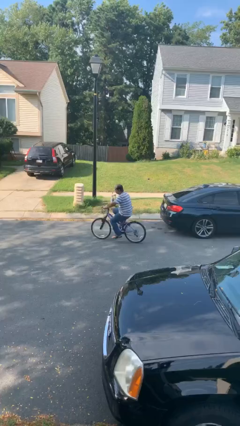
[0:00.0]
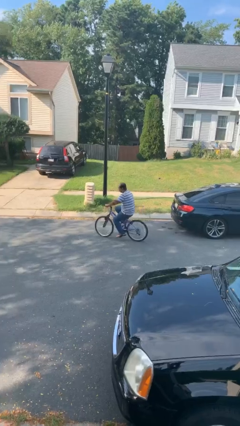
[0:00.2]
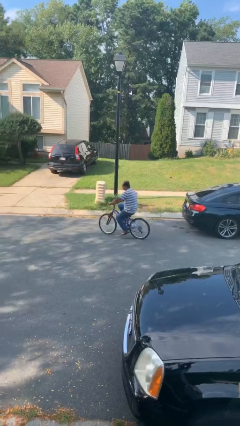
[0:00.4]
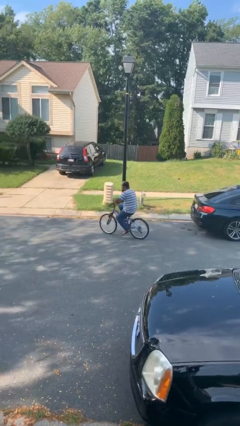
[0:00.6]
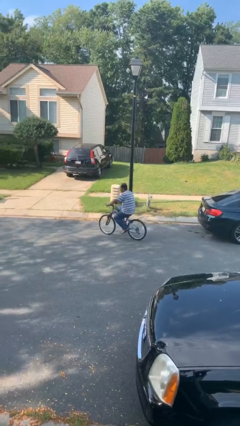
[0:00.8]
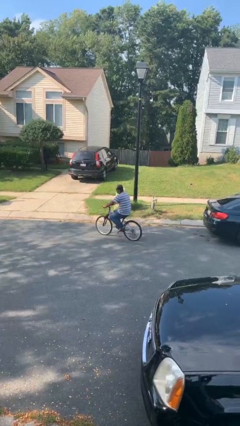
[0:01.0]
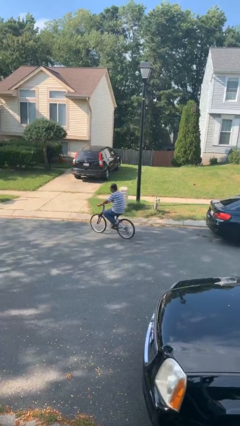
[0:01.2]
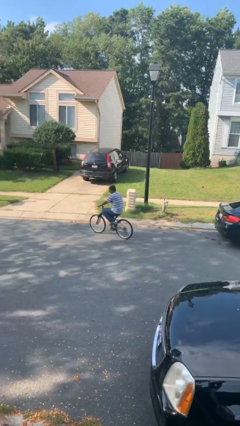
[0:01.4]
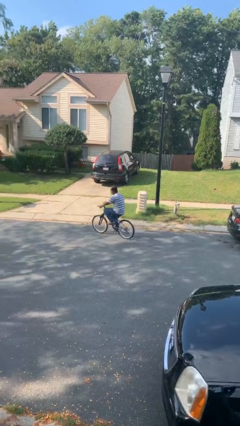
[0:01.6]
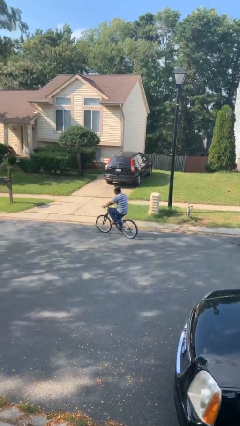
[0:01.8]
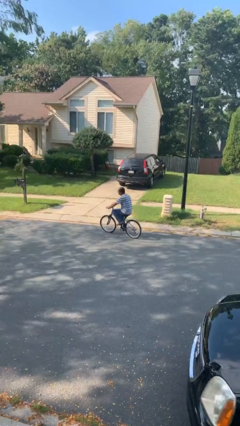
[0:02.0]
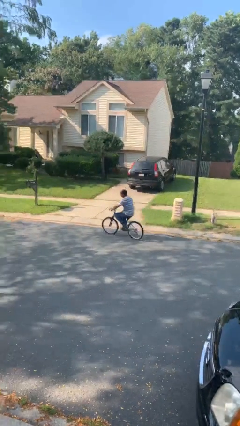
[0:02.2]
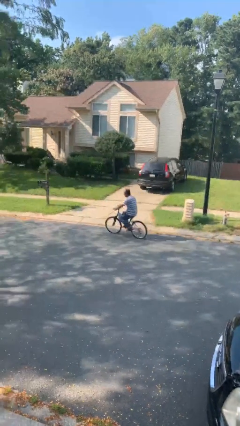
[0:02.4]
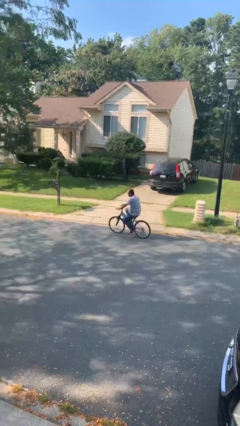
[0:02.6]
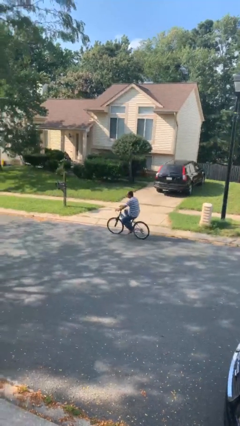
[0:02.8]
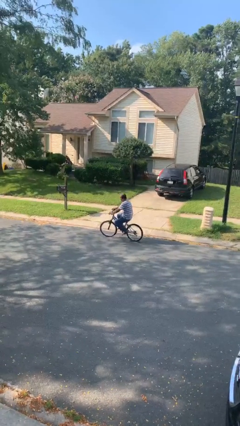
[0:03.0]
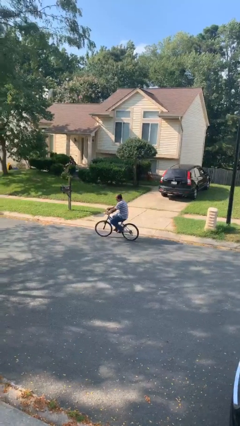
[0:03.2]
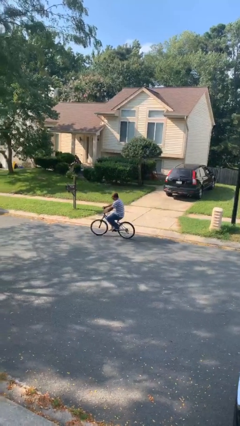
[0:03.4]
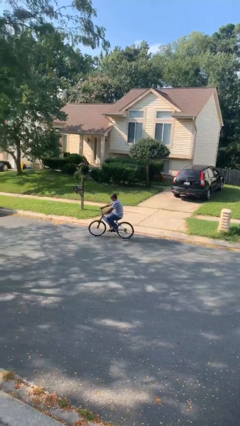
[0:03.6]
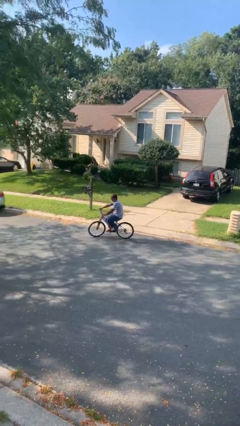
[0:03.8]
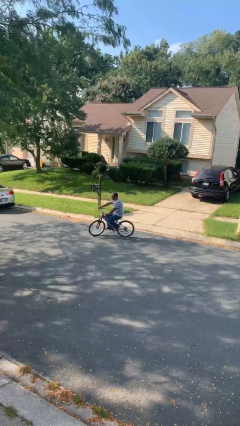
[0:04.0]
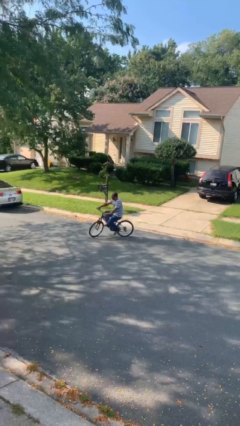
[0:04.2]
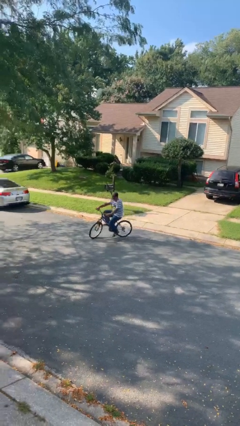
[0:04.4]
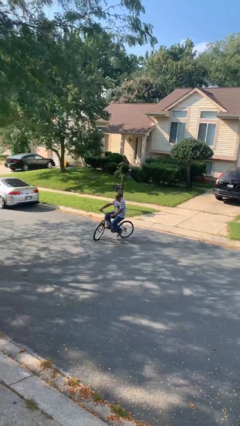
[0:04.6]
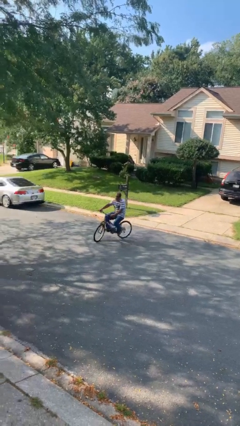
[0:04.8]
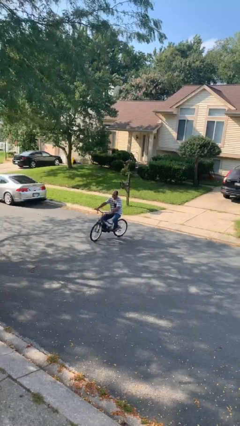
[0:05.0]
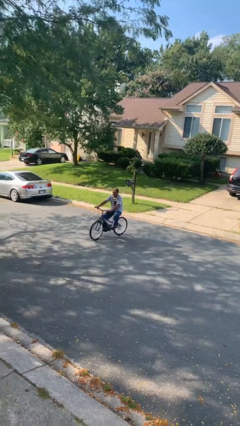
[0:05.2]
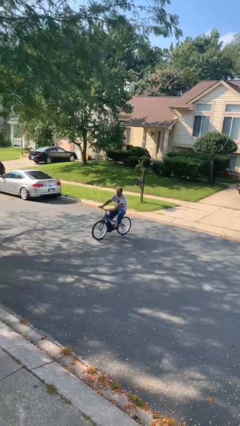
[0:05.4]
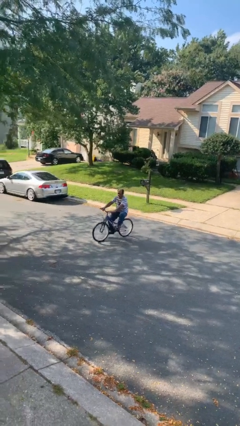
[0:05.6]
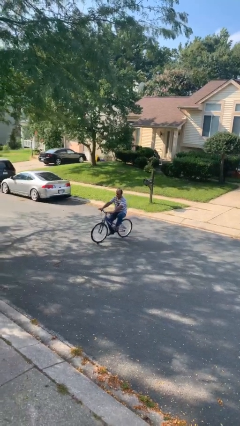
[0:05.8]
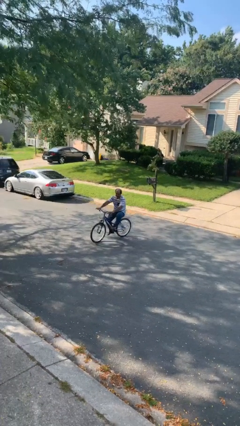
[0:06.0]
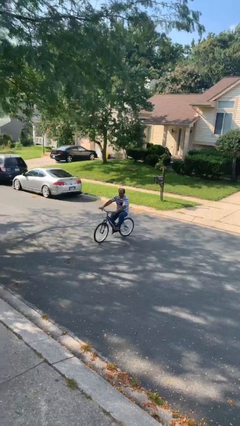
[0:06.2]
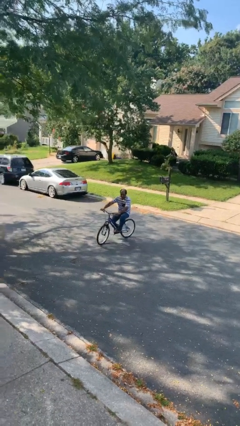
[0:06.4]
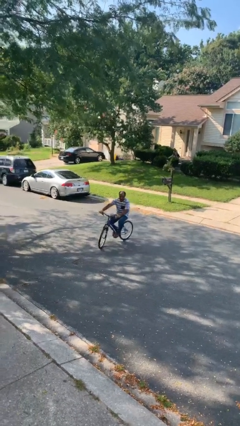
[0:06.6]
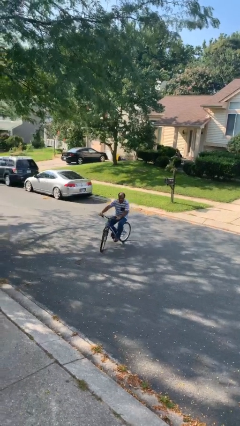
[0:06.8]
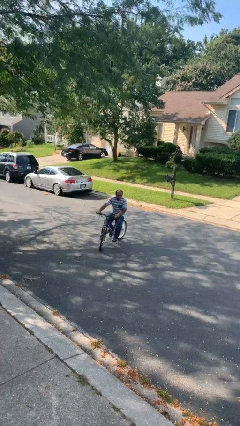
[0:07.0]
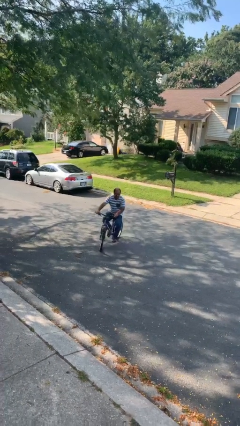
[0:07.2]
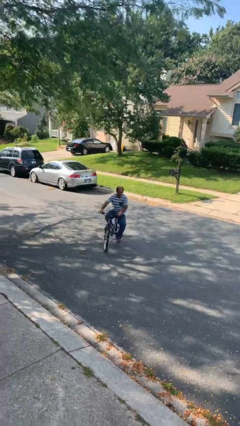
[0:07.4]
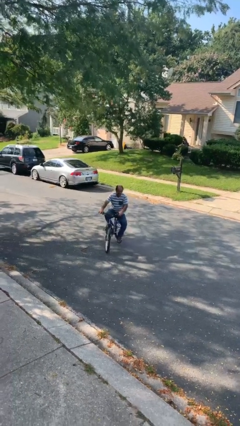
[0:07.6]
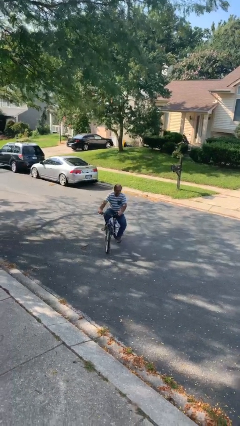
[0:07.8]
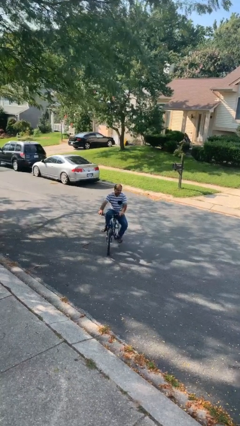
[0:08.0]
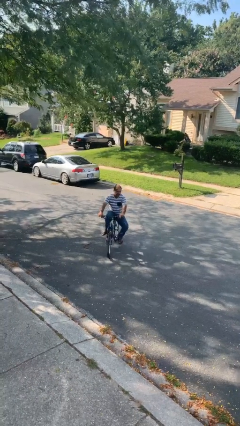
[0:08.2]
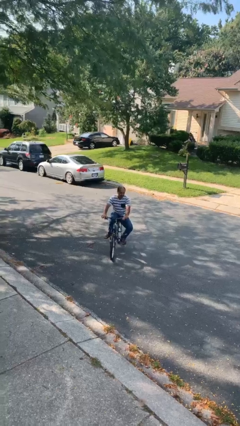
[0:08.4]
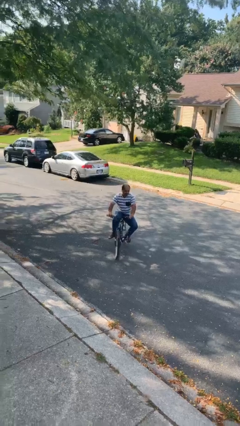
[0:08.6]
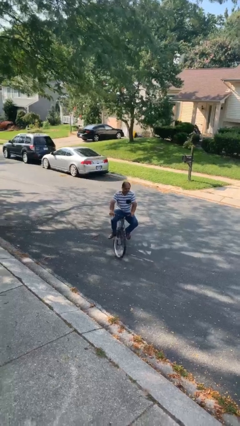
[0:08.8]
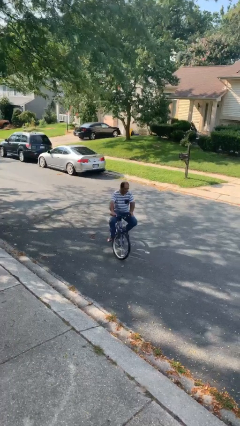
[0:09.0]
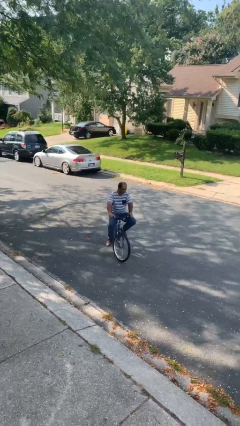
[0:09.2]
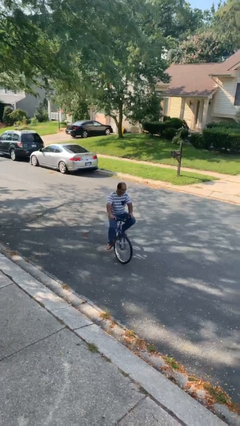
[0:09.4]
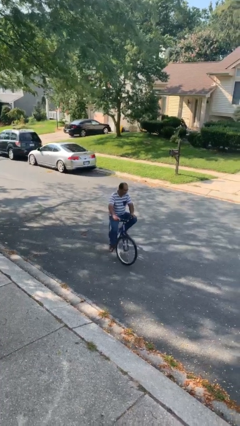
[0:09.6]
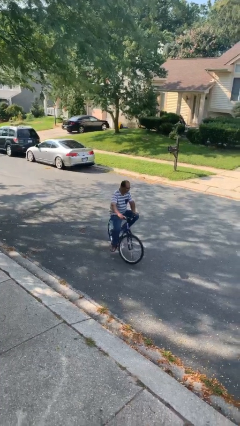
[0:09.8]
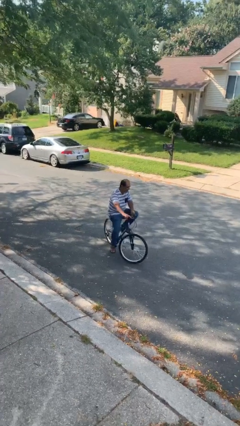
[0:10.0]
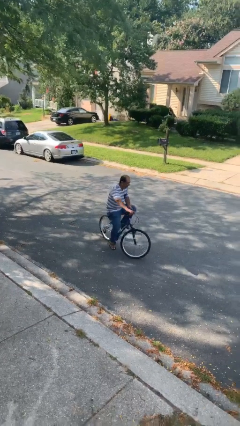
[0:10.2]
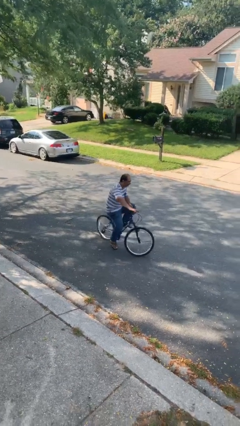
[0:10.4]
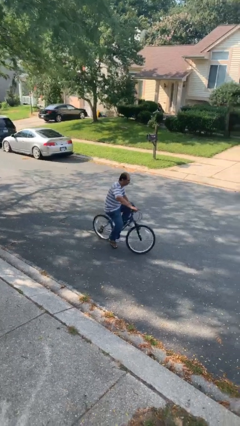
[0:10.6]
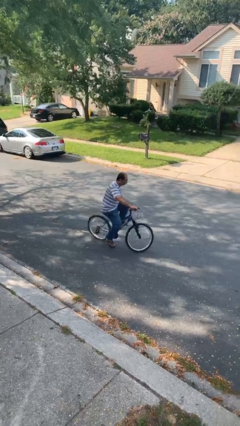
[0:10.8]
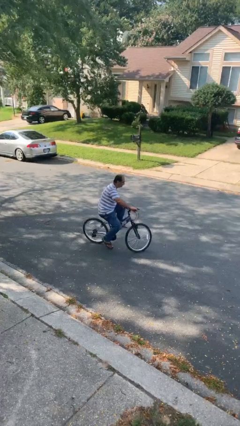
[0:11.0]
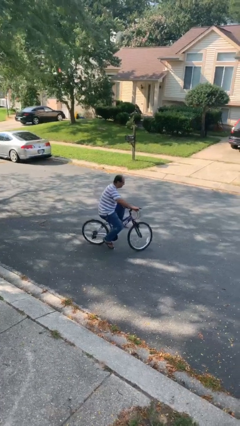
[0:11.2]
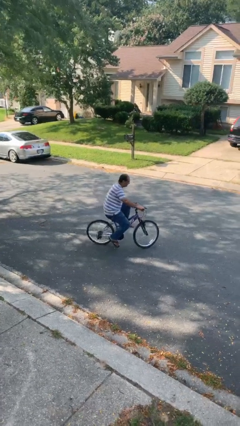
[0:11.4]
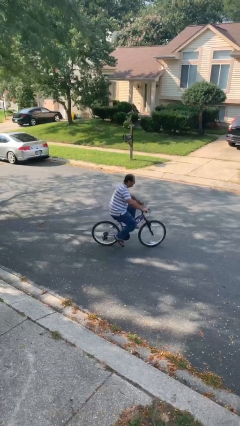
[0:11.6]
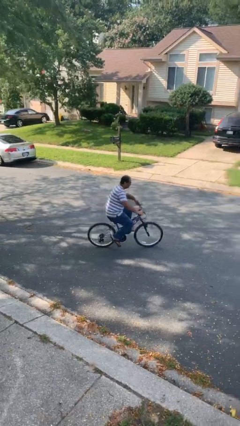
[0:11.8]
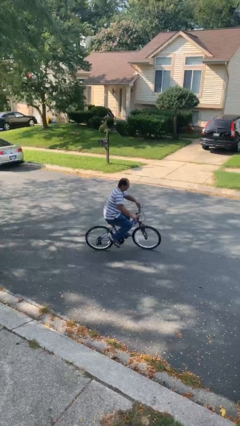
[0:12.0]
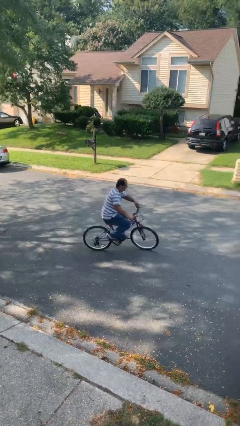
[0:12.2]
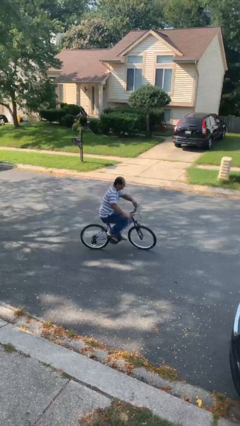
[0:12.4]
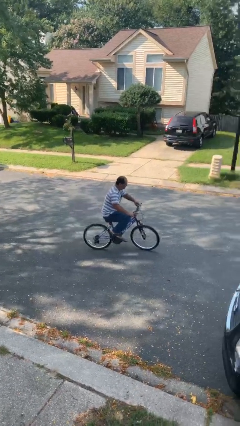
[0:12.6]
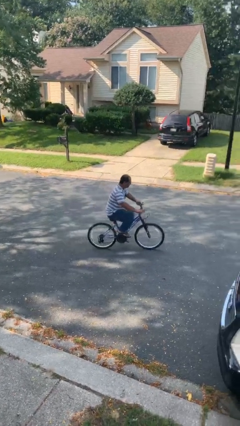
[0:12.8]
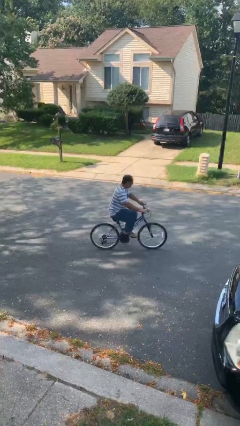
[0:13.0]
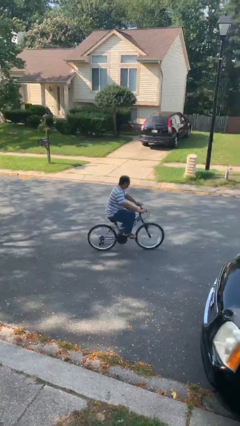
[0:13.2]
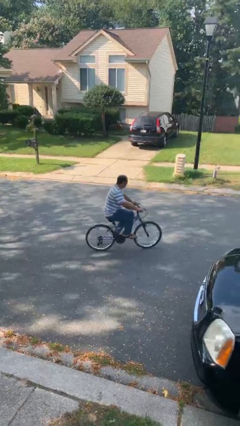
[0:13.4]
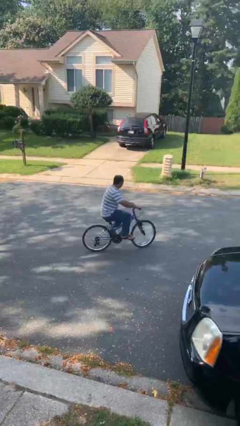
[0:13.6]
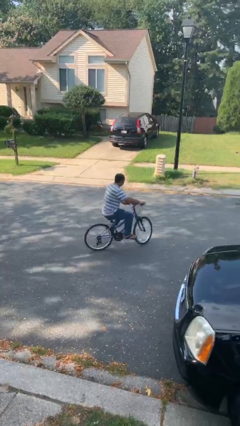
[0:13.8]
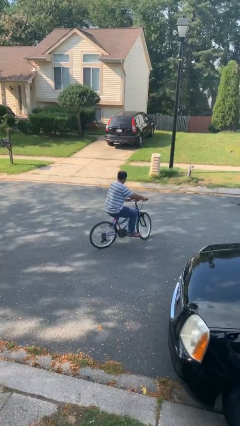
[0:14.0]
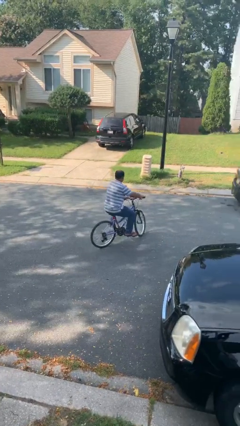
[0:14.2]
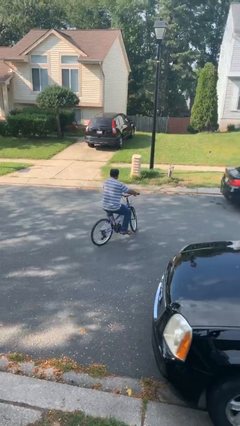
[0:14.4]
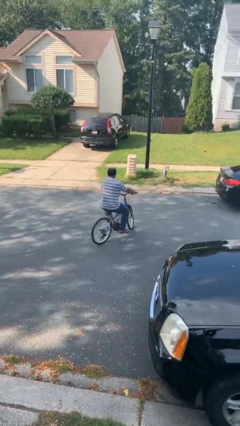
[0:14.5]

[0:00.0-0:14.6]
person rides bicycle

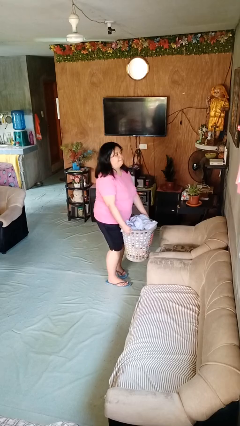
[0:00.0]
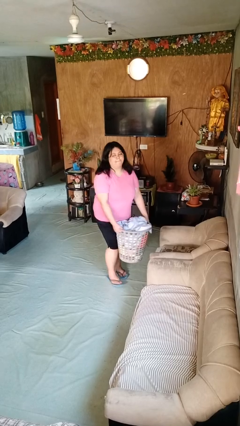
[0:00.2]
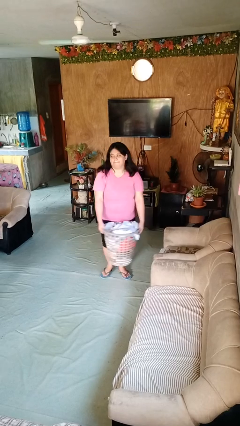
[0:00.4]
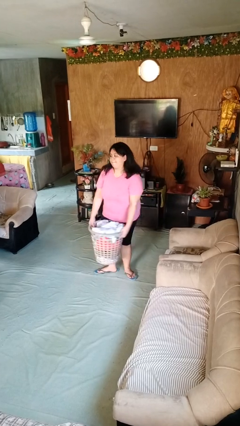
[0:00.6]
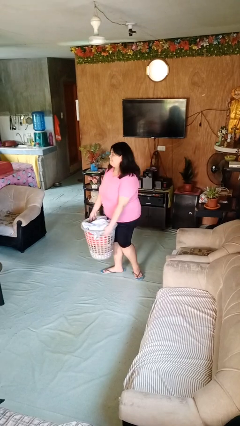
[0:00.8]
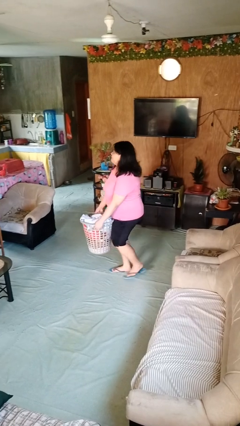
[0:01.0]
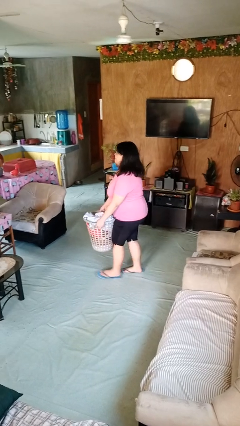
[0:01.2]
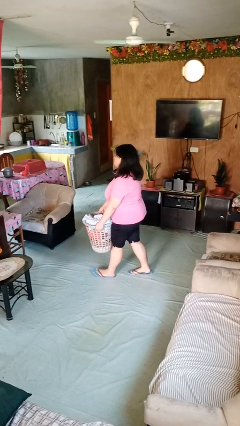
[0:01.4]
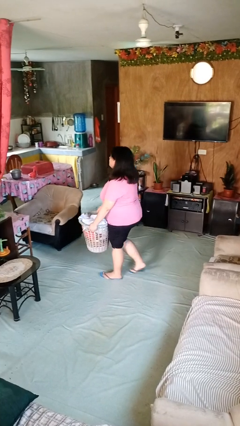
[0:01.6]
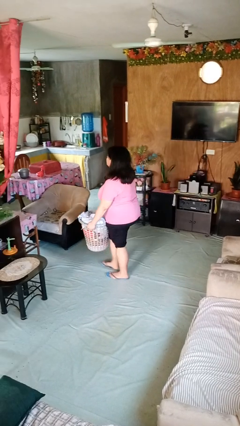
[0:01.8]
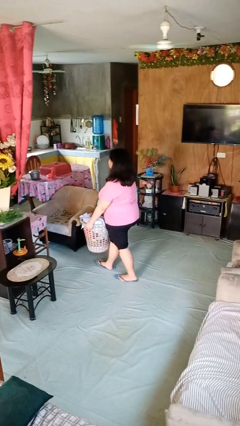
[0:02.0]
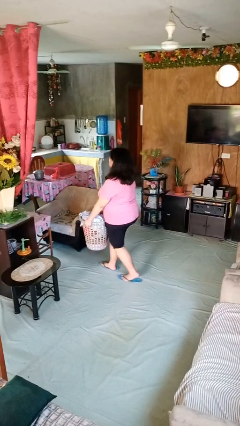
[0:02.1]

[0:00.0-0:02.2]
person carries laundry basket

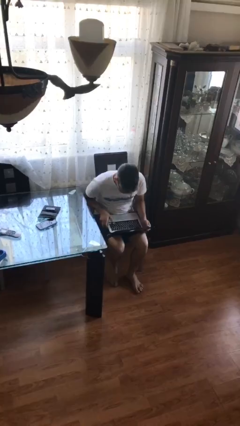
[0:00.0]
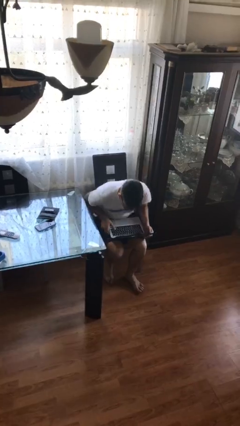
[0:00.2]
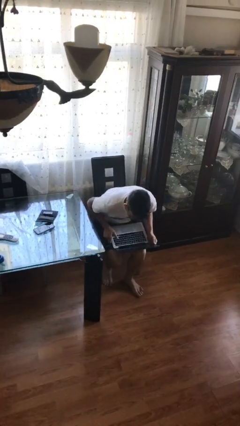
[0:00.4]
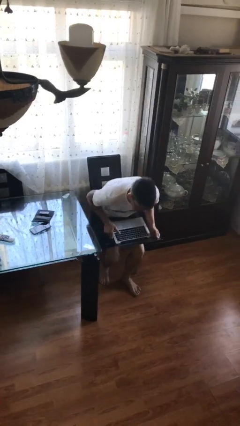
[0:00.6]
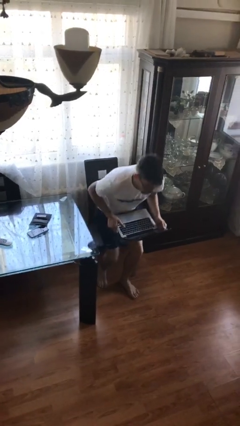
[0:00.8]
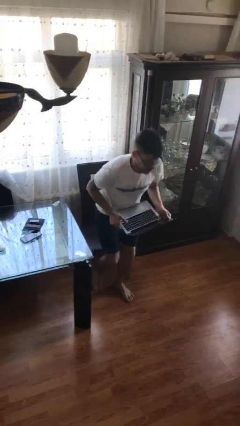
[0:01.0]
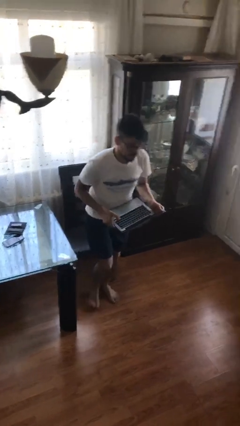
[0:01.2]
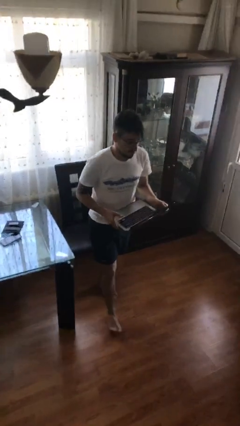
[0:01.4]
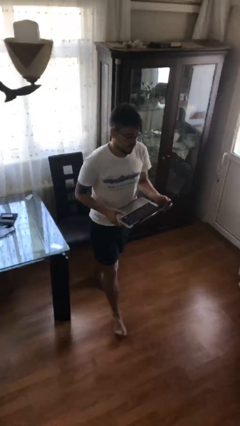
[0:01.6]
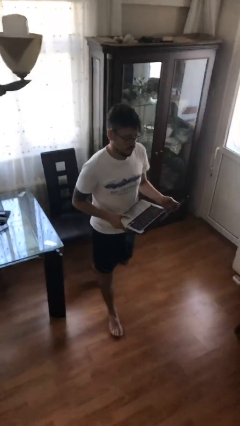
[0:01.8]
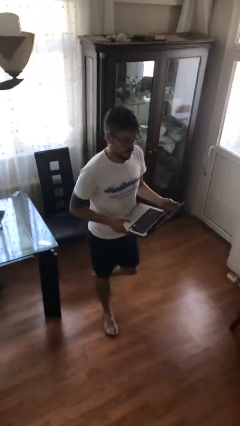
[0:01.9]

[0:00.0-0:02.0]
person stands up
